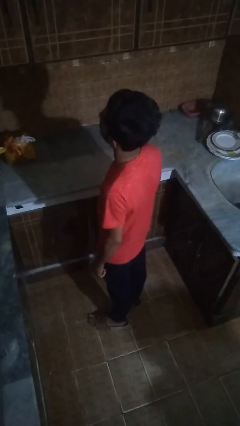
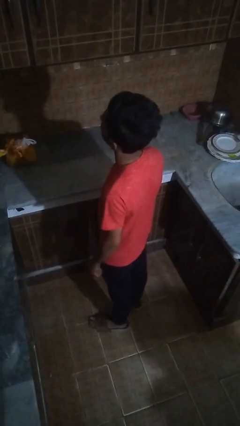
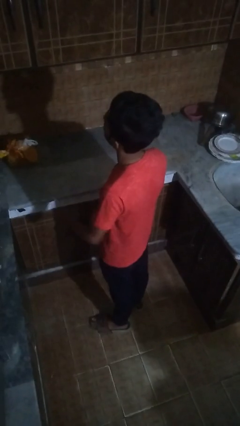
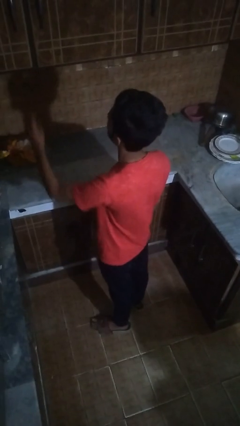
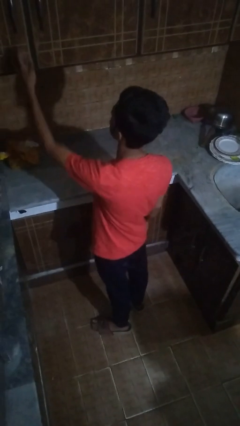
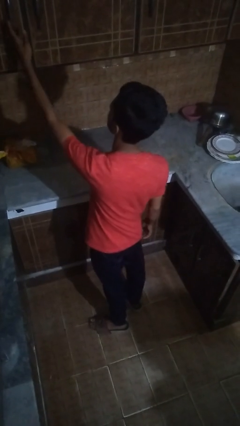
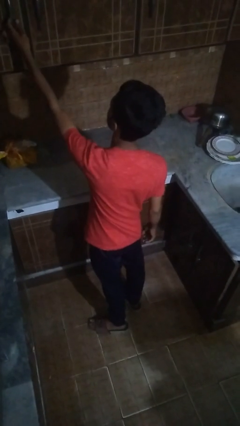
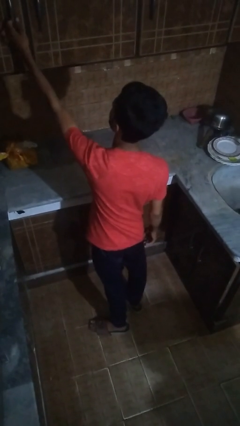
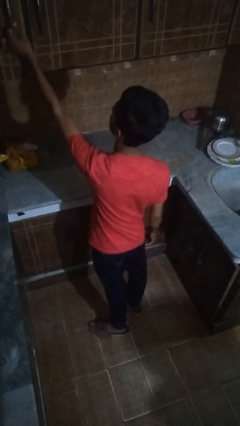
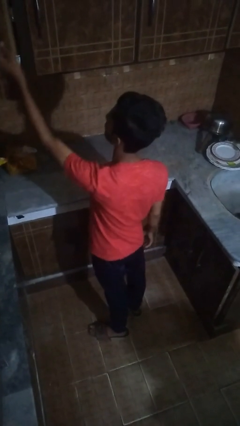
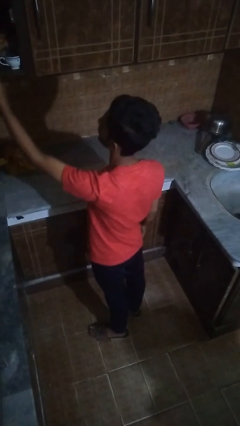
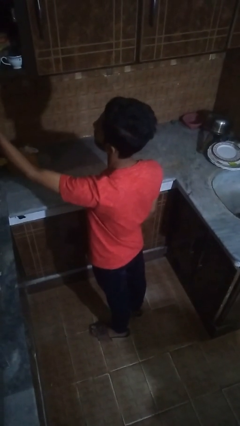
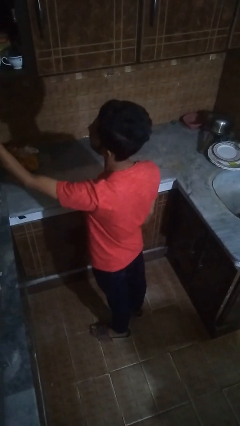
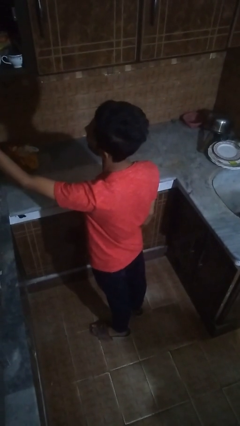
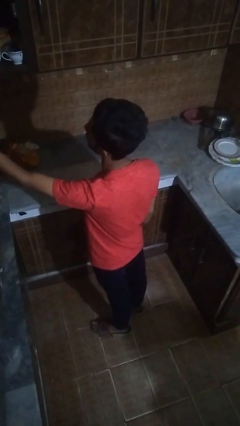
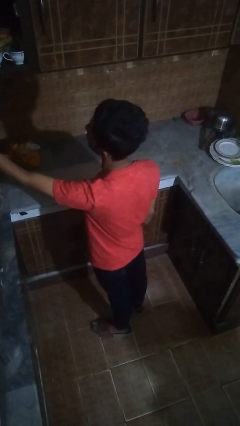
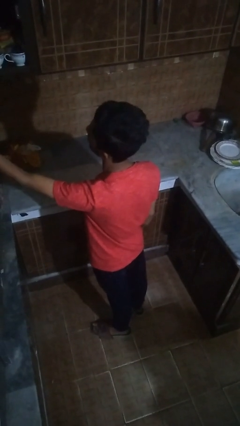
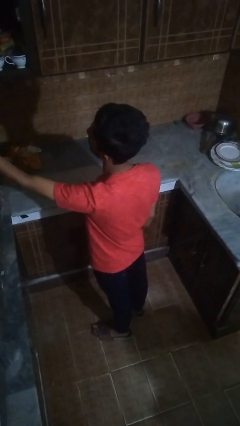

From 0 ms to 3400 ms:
person opens cabinet

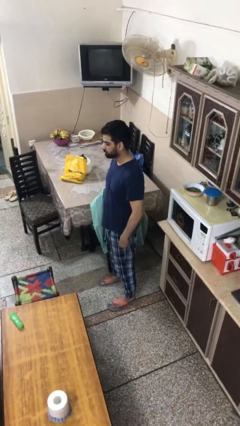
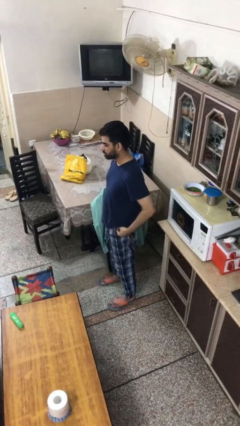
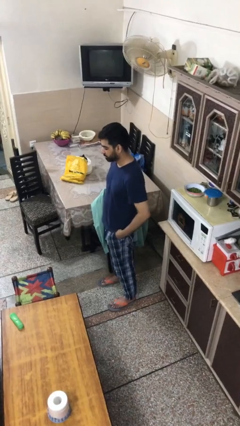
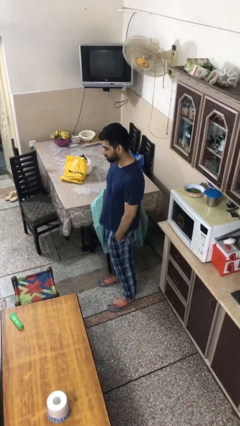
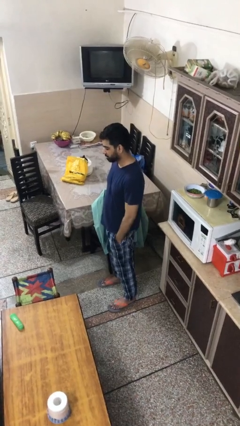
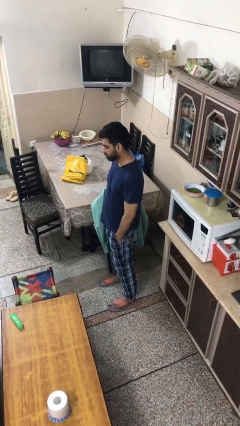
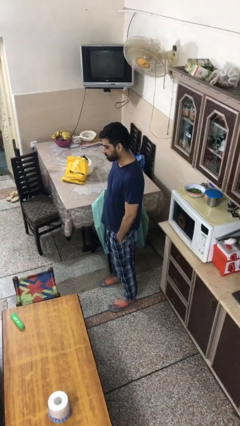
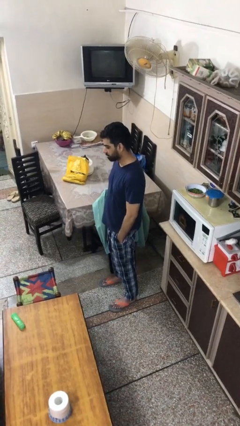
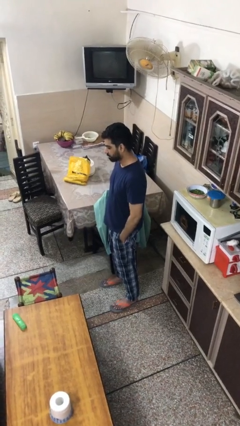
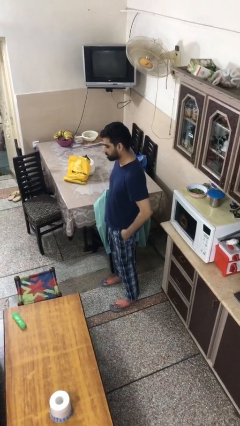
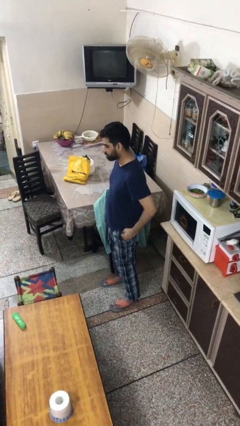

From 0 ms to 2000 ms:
person puts hands in back pockets

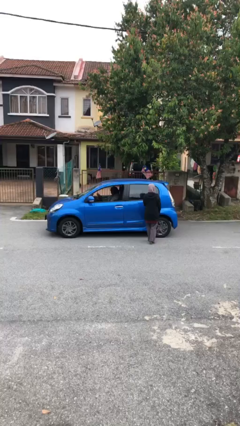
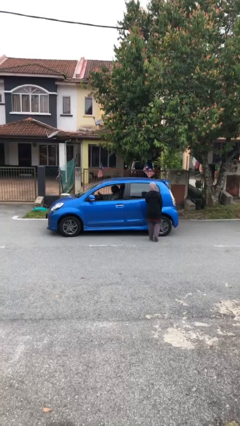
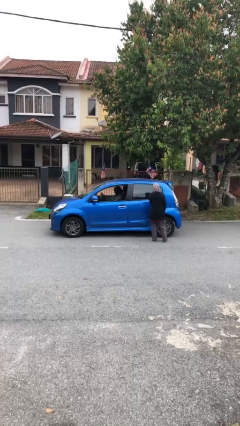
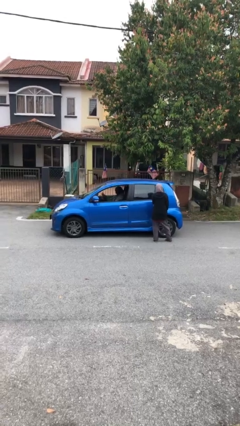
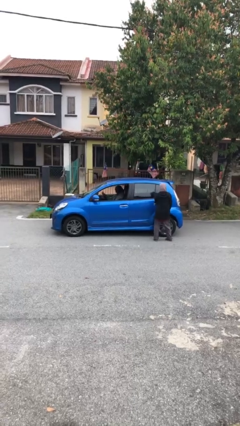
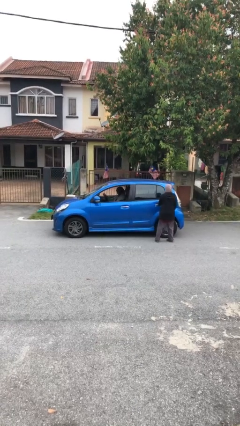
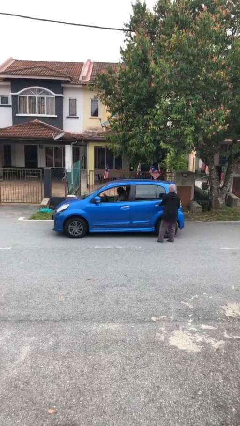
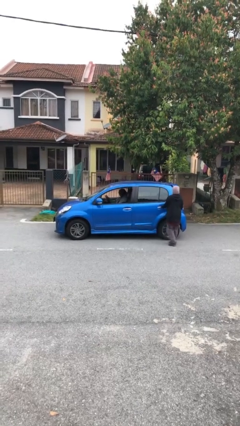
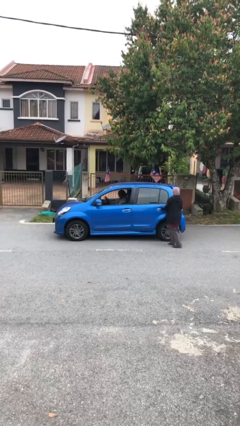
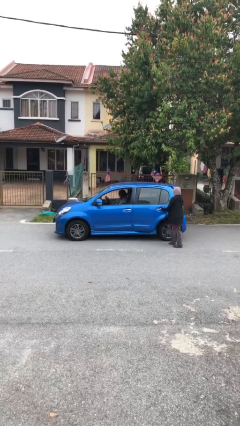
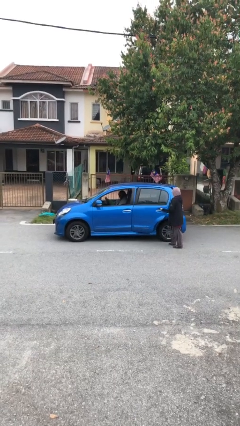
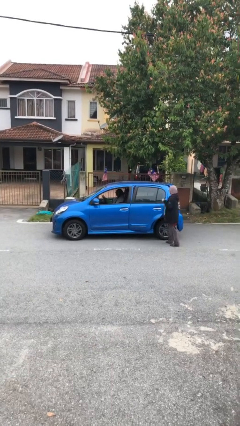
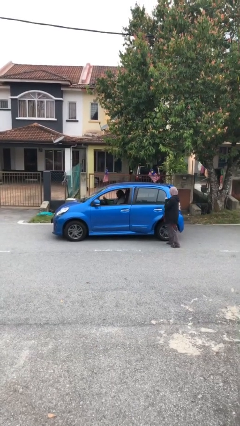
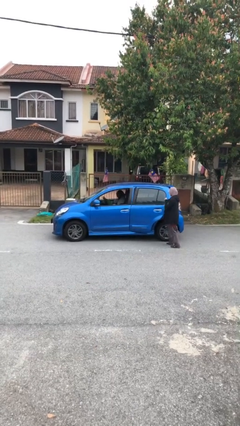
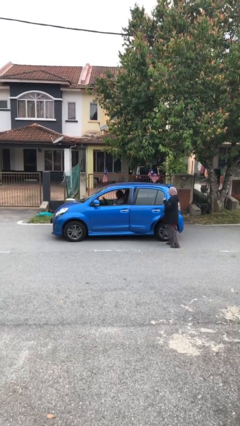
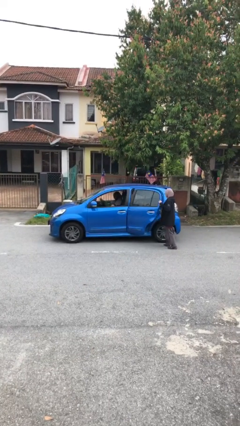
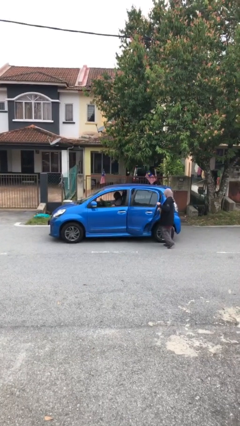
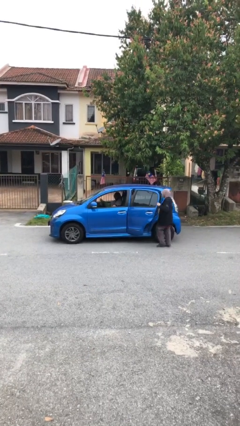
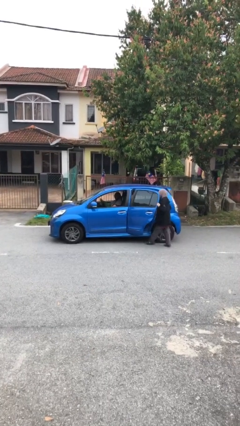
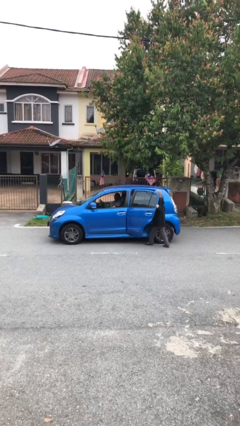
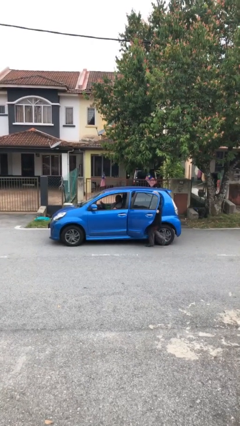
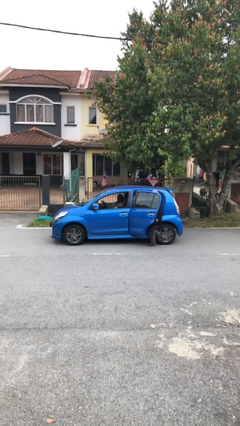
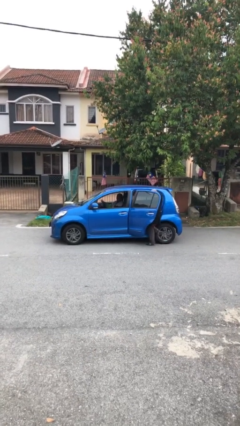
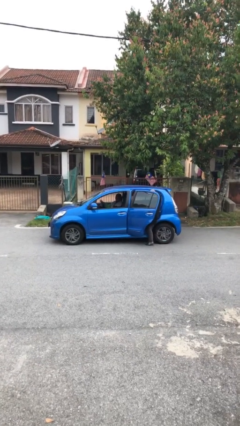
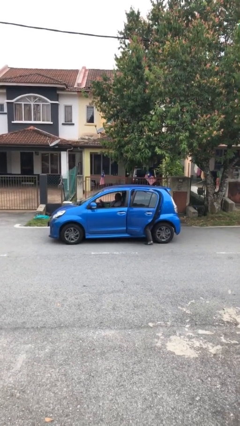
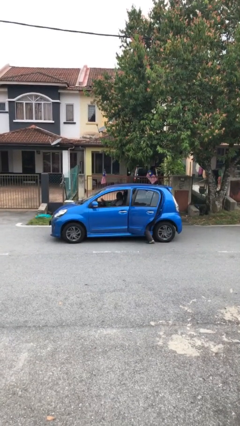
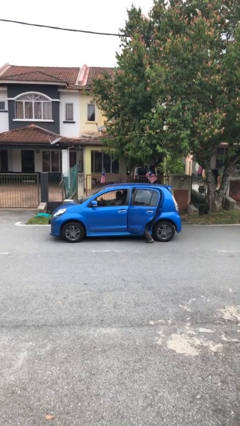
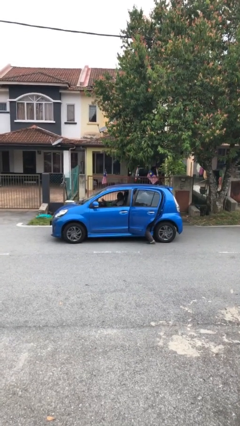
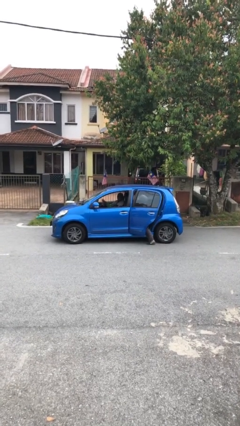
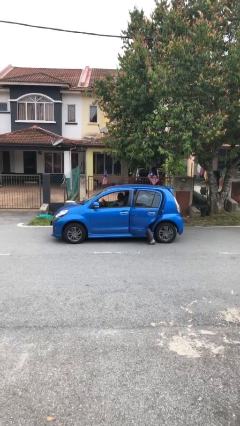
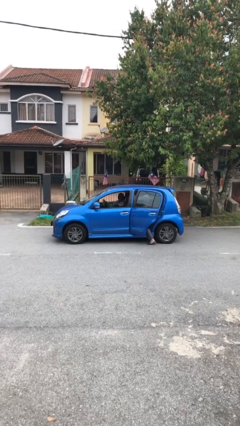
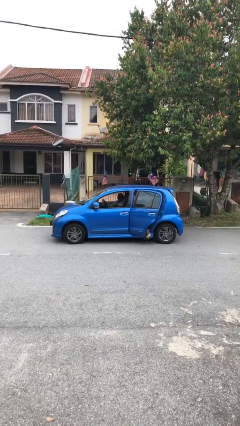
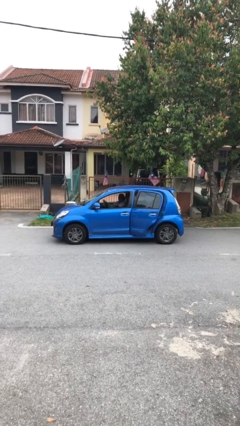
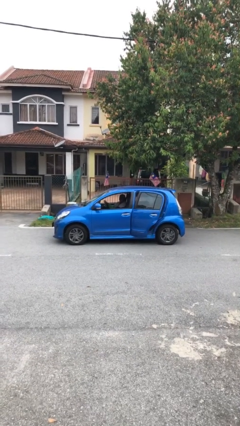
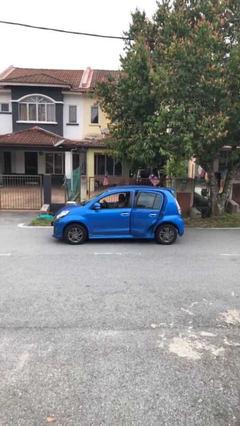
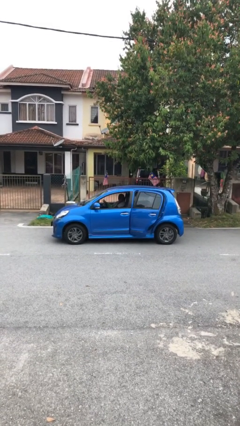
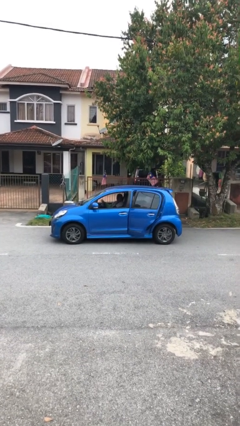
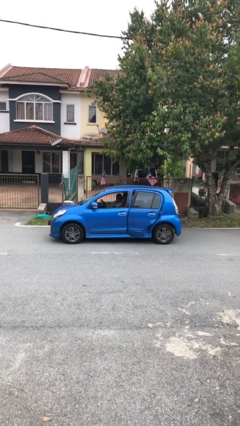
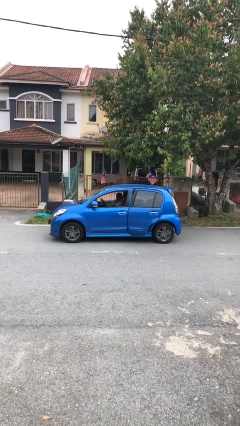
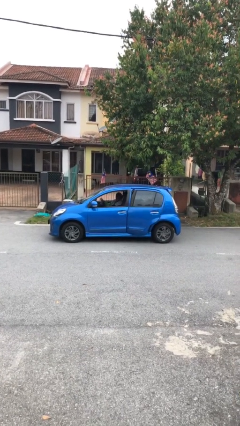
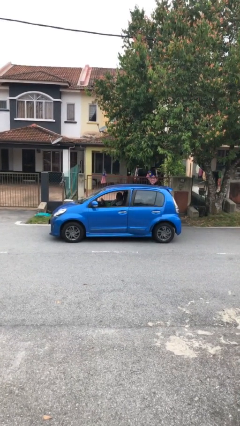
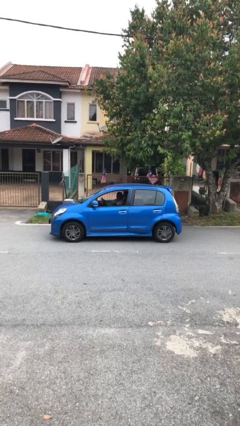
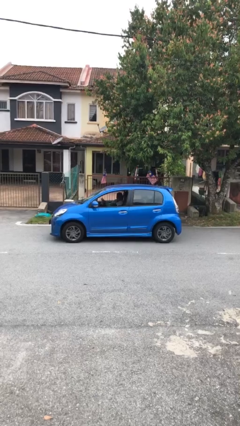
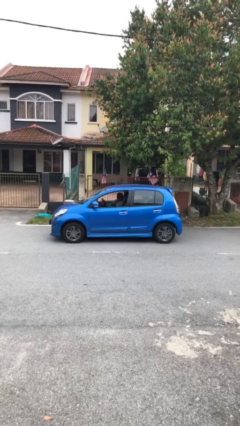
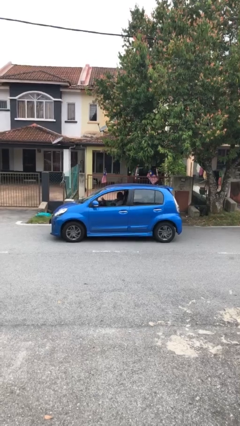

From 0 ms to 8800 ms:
car picks up person

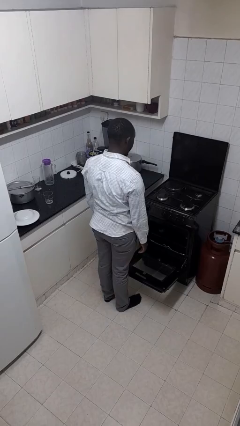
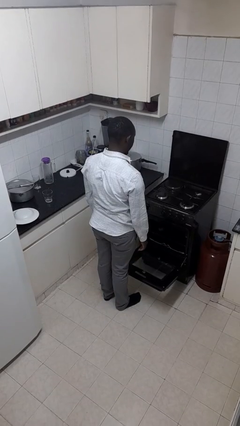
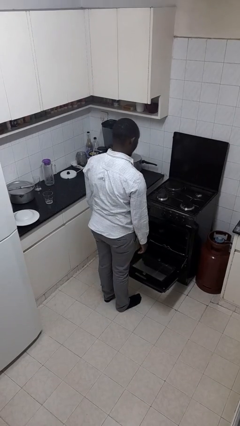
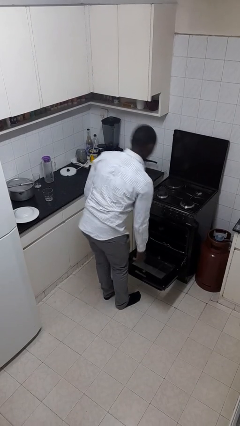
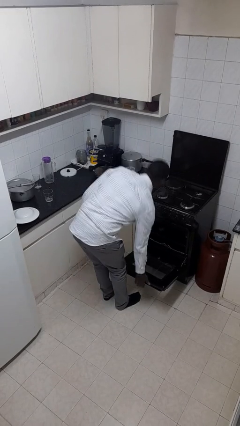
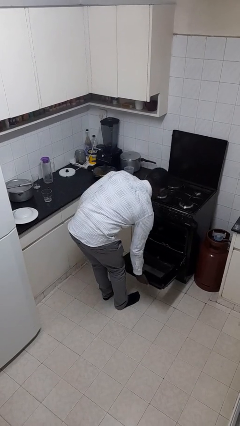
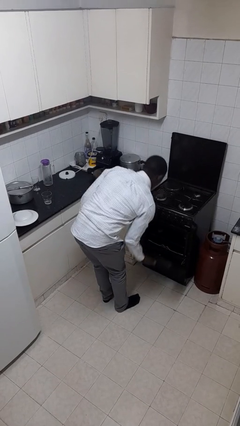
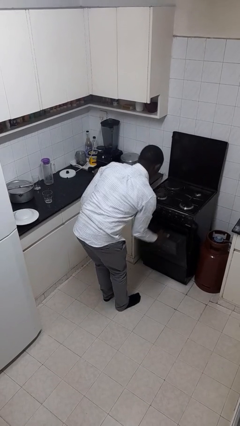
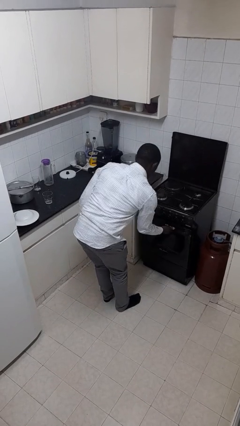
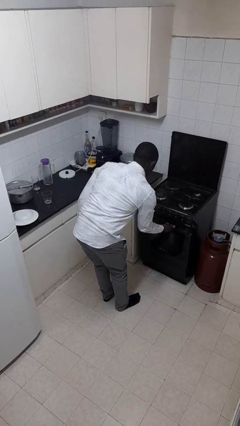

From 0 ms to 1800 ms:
person closes oven door

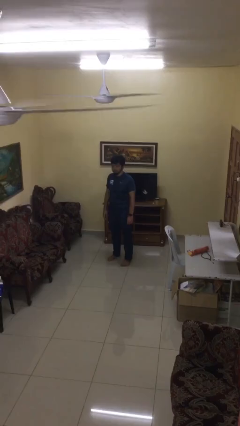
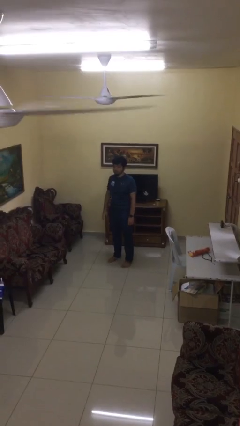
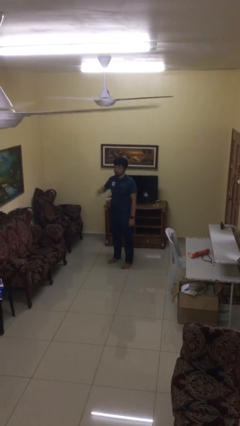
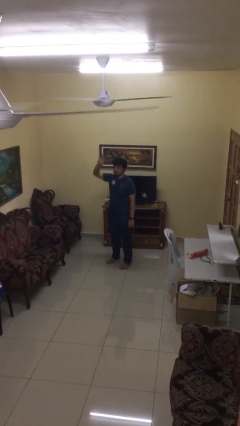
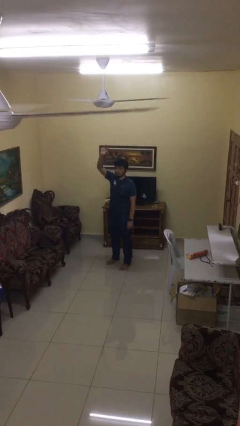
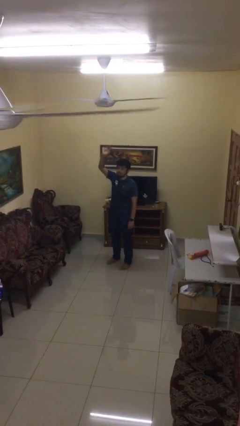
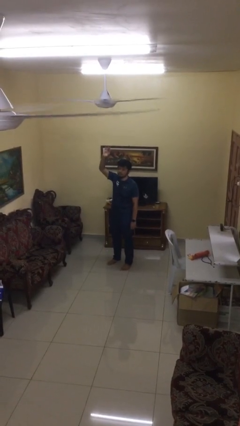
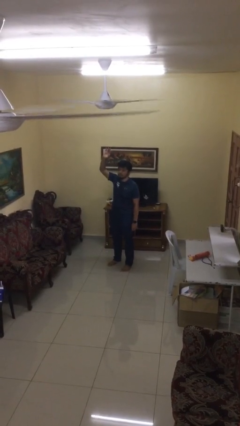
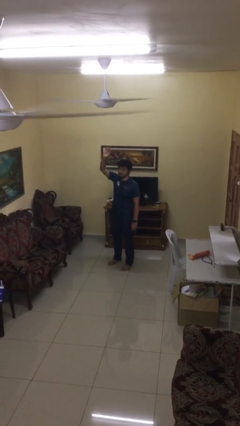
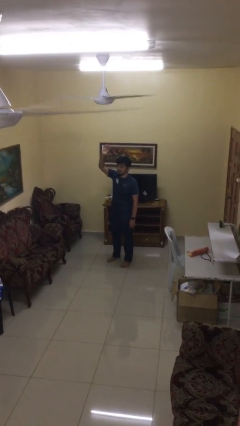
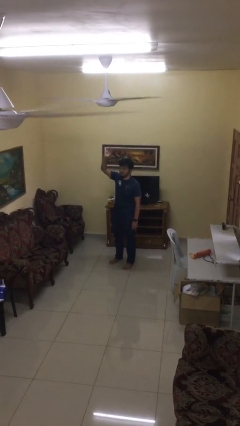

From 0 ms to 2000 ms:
person gestures raise hand
